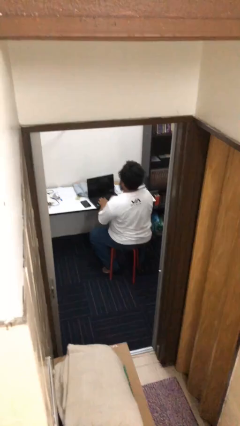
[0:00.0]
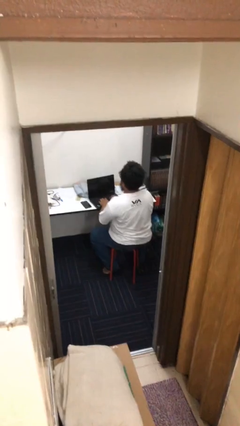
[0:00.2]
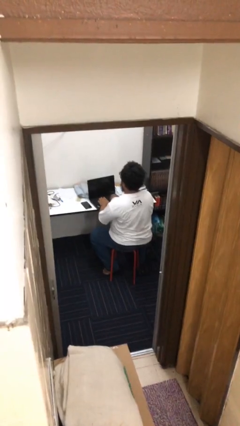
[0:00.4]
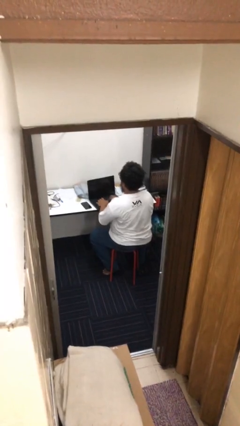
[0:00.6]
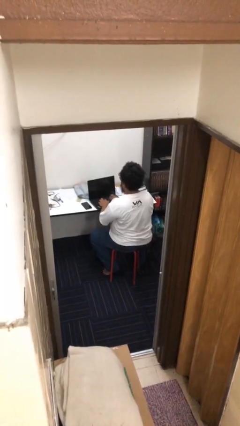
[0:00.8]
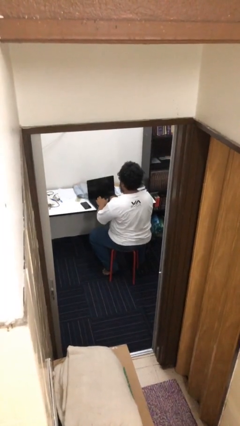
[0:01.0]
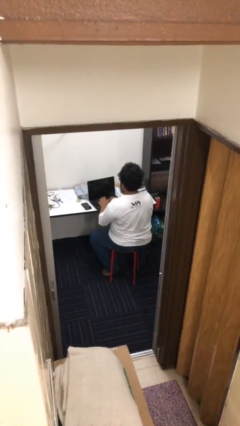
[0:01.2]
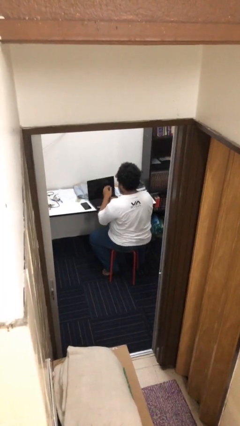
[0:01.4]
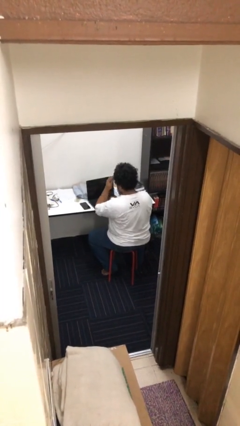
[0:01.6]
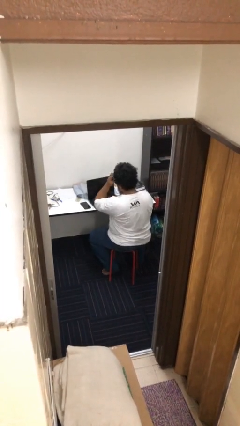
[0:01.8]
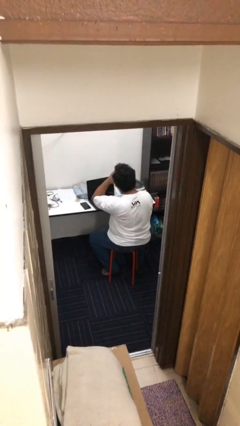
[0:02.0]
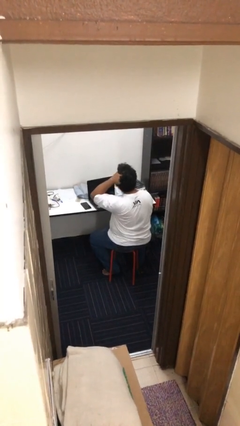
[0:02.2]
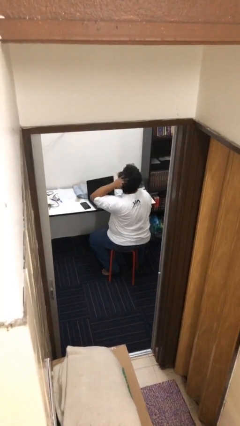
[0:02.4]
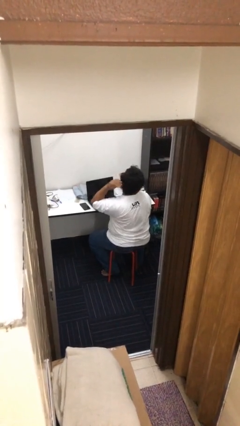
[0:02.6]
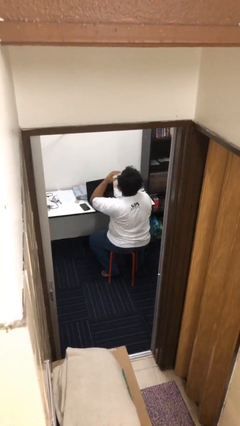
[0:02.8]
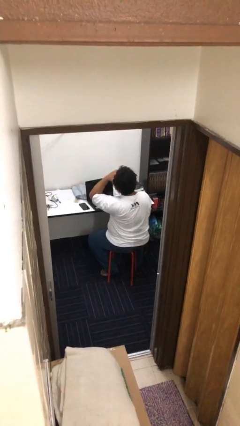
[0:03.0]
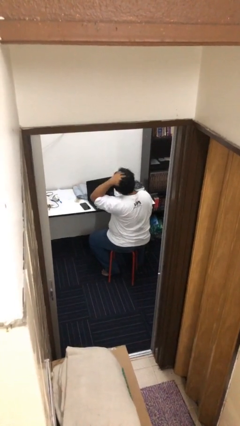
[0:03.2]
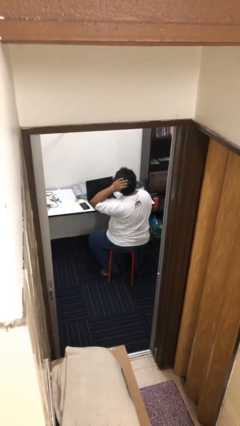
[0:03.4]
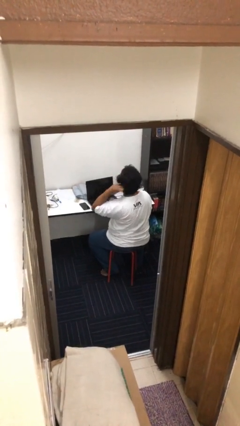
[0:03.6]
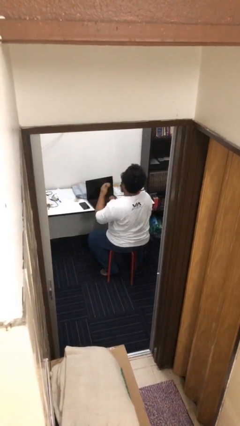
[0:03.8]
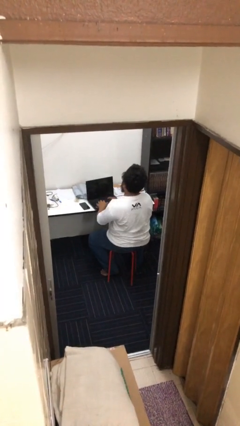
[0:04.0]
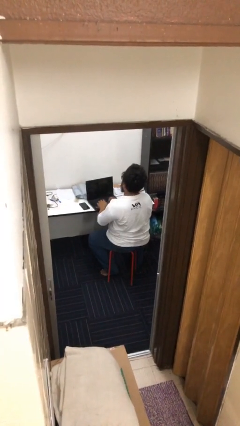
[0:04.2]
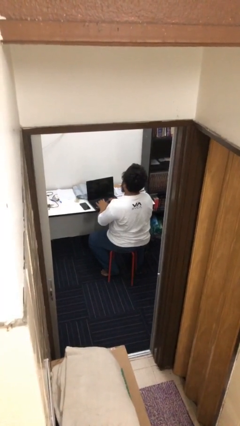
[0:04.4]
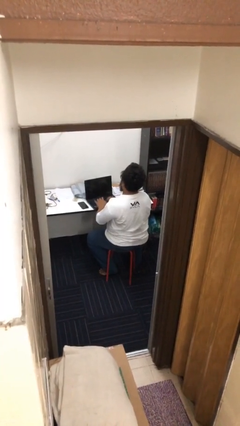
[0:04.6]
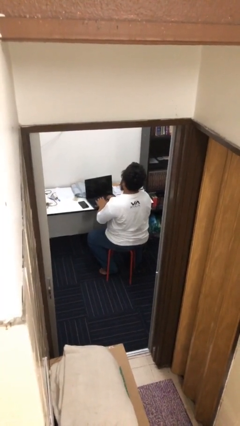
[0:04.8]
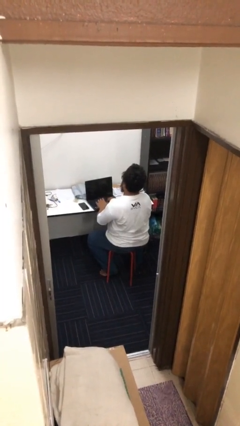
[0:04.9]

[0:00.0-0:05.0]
person interacts with laptop

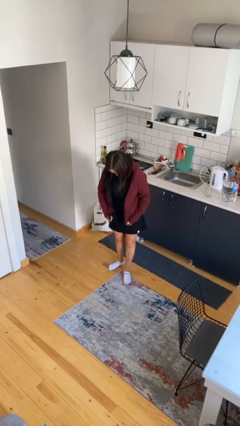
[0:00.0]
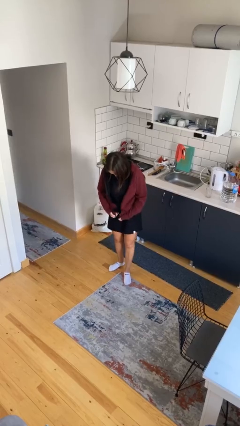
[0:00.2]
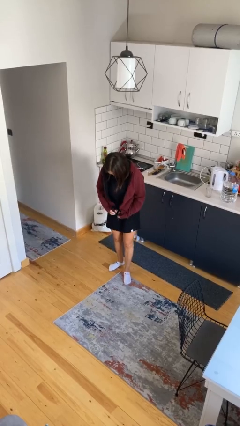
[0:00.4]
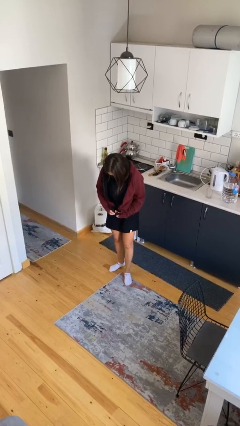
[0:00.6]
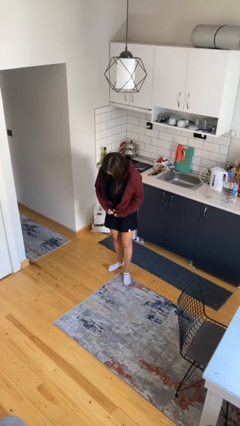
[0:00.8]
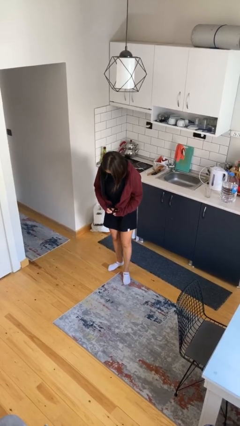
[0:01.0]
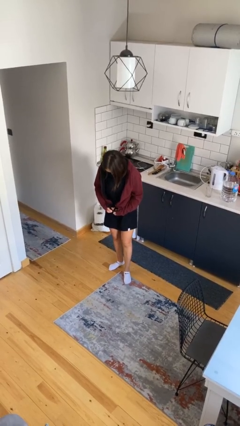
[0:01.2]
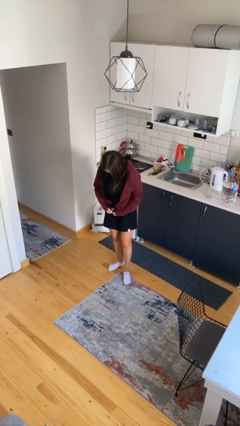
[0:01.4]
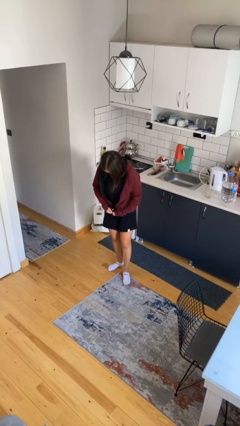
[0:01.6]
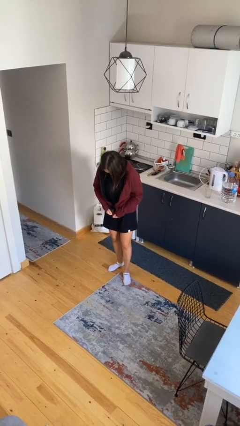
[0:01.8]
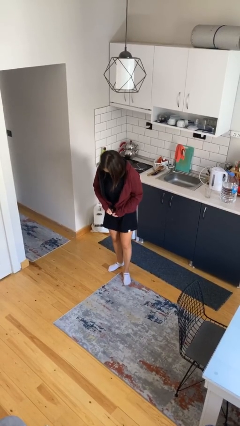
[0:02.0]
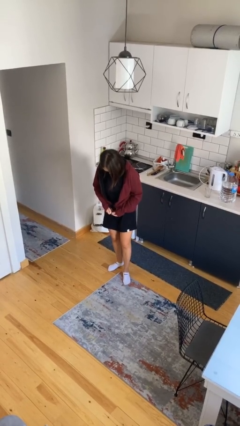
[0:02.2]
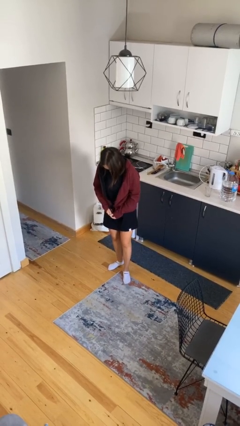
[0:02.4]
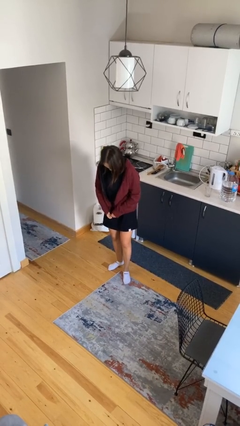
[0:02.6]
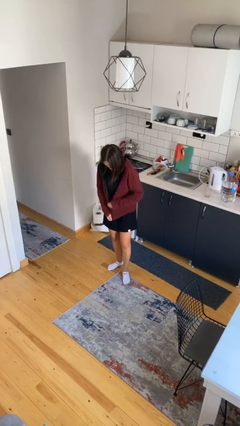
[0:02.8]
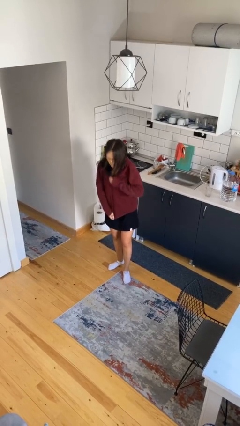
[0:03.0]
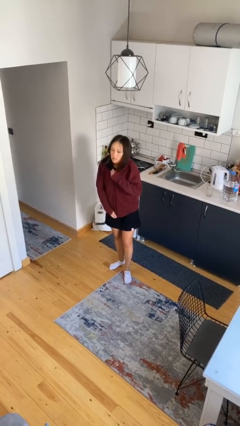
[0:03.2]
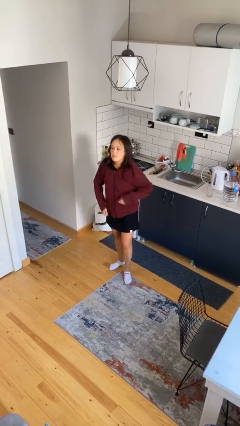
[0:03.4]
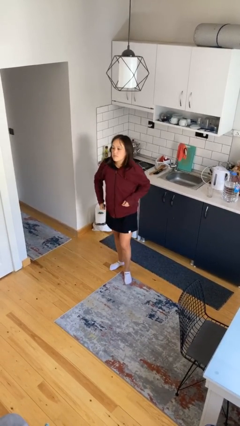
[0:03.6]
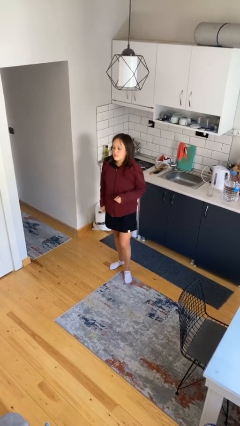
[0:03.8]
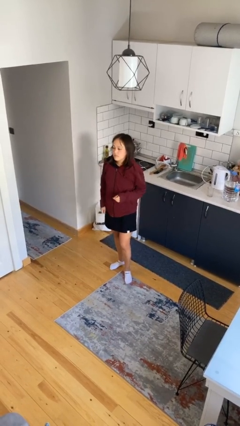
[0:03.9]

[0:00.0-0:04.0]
person zips up jacket

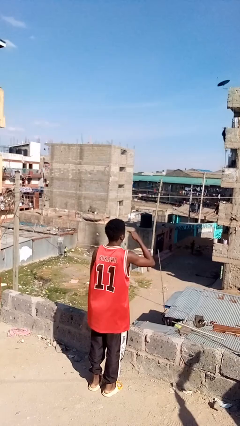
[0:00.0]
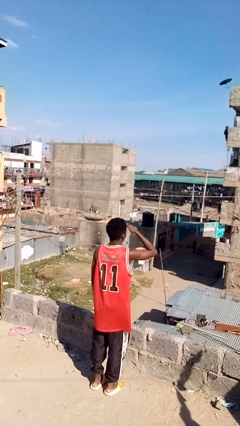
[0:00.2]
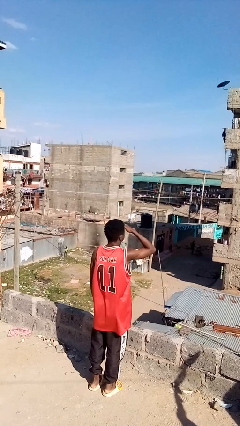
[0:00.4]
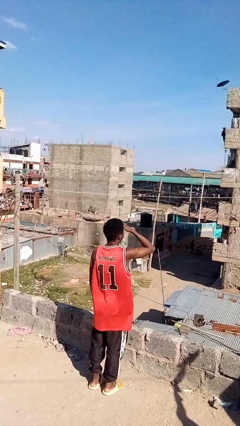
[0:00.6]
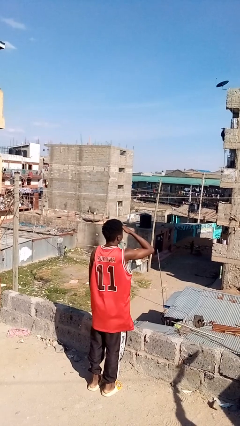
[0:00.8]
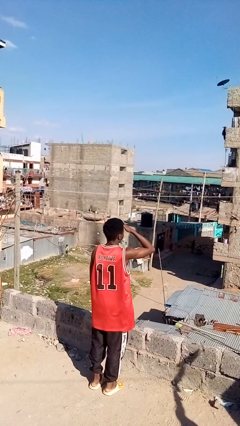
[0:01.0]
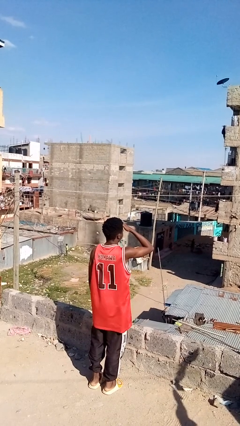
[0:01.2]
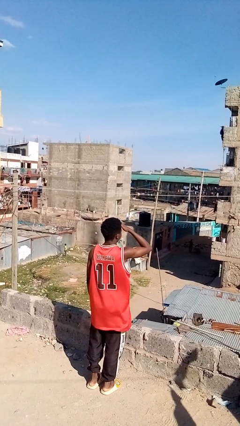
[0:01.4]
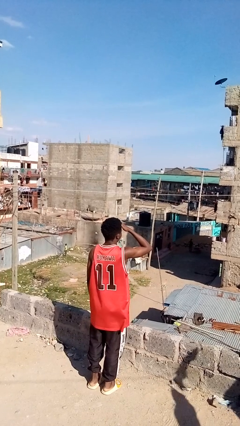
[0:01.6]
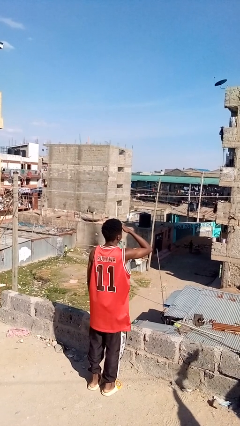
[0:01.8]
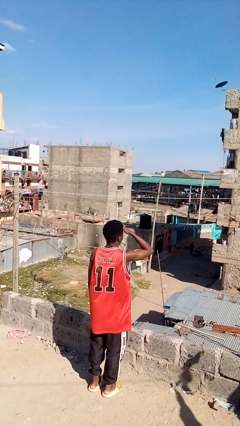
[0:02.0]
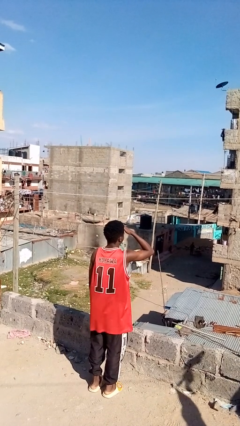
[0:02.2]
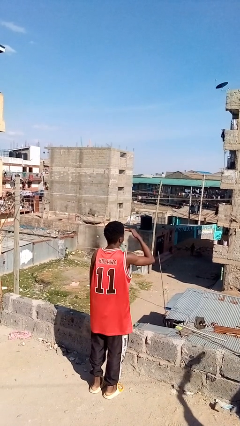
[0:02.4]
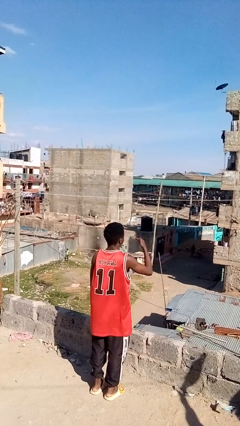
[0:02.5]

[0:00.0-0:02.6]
person shades eyes

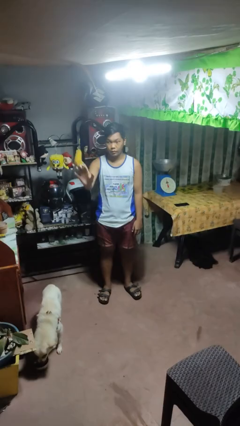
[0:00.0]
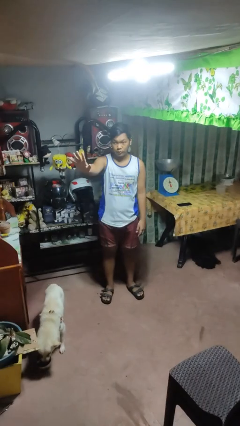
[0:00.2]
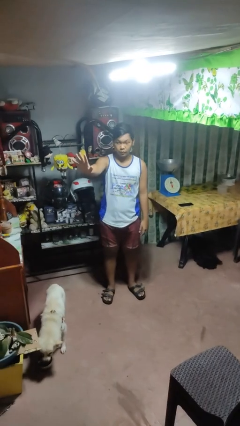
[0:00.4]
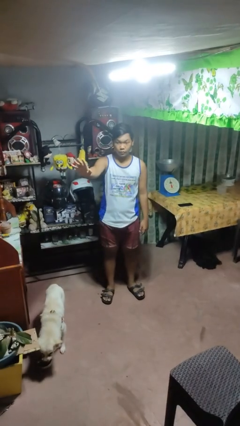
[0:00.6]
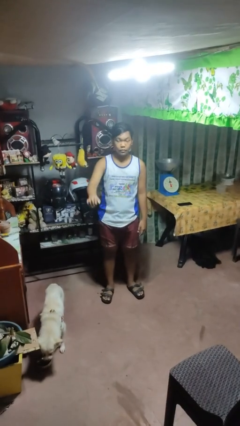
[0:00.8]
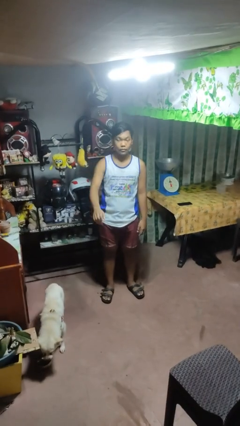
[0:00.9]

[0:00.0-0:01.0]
person gestures stop

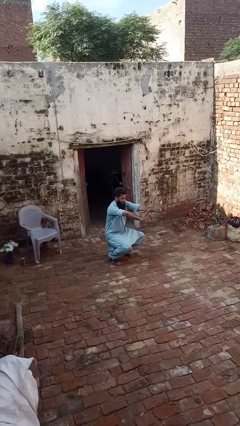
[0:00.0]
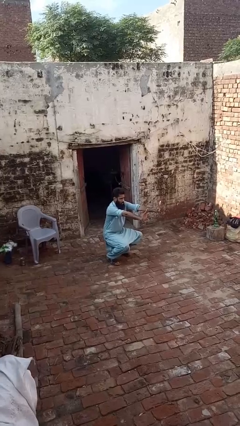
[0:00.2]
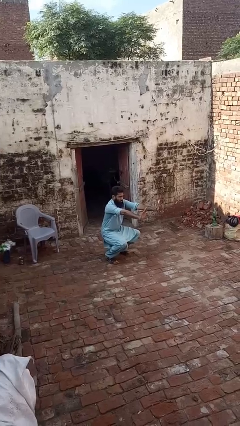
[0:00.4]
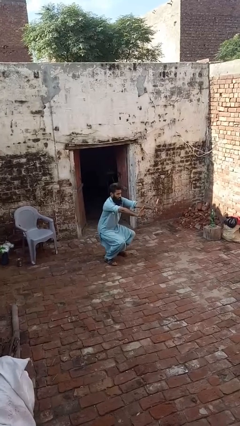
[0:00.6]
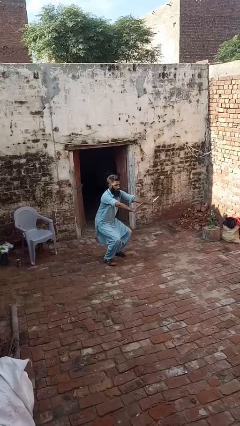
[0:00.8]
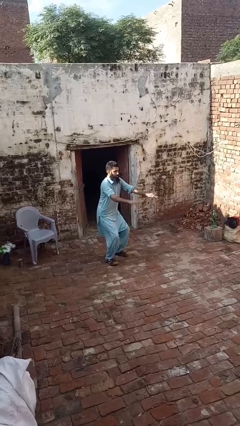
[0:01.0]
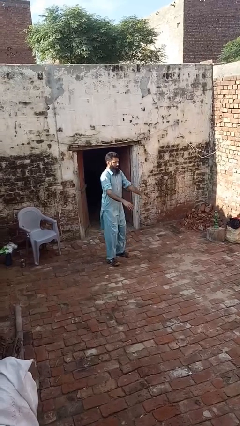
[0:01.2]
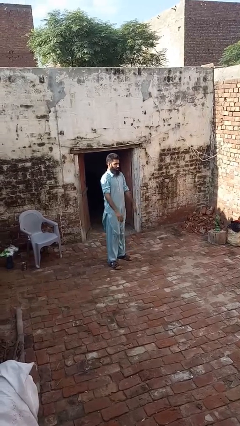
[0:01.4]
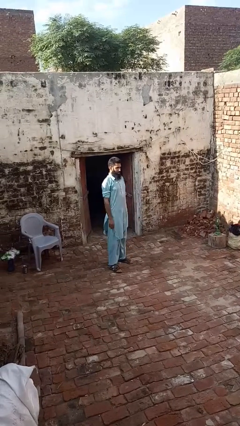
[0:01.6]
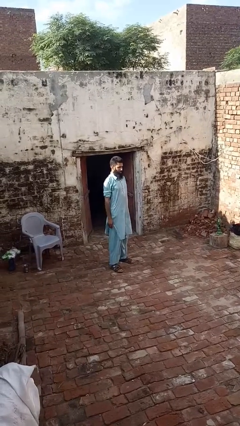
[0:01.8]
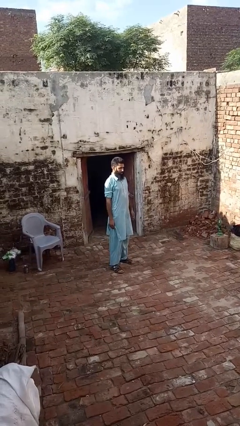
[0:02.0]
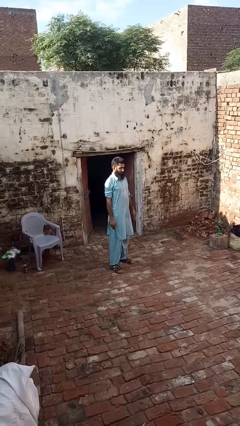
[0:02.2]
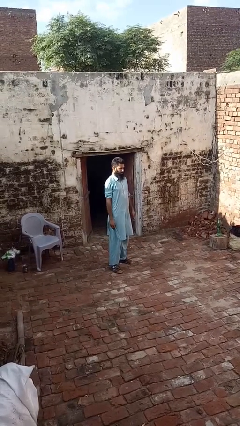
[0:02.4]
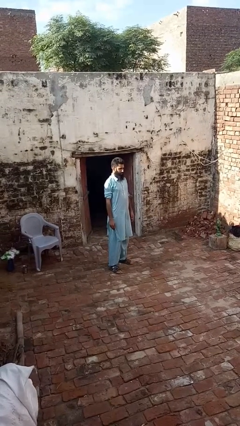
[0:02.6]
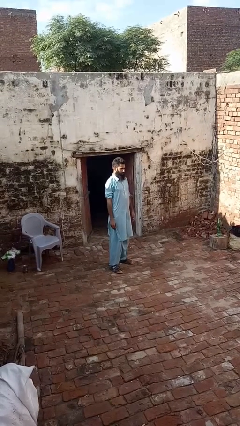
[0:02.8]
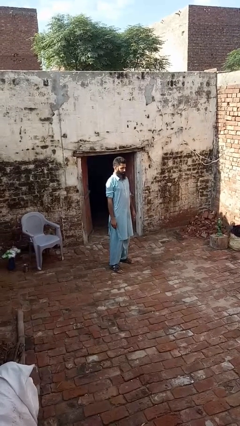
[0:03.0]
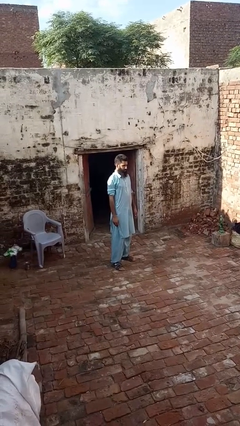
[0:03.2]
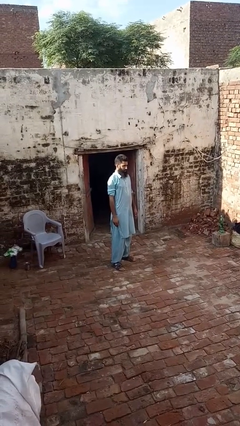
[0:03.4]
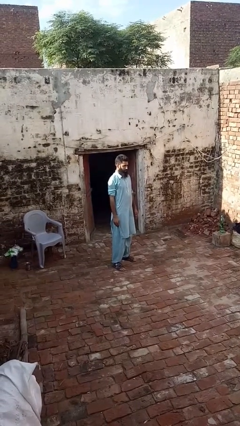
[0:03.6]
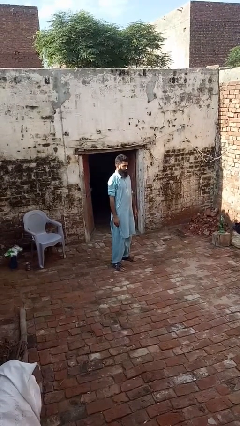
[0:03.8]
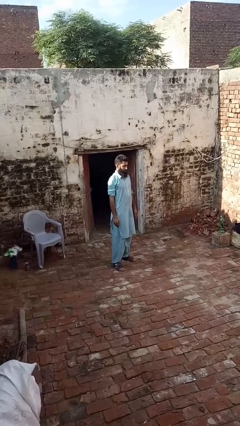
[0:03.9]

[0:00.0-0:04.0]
person stands up

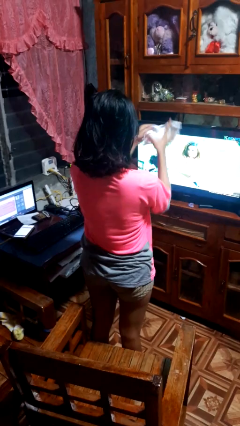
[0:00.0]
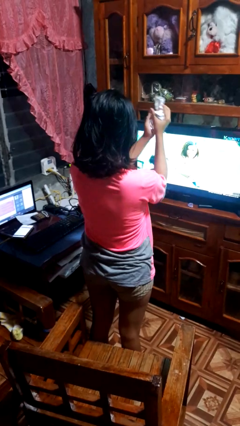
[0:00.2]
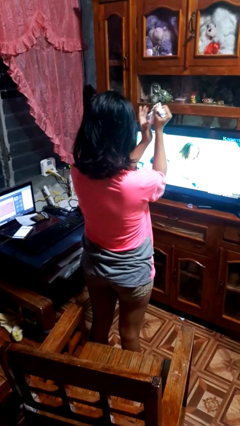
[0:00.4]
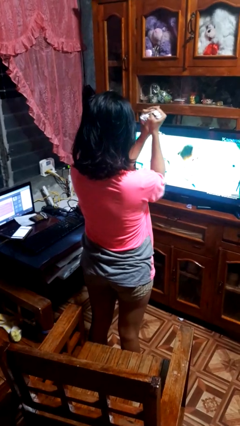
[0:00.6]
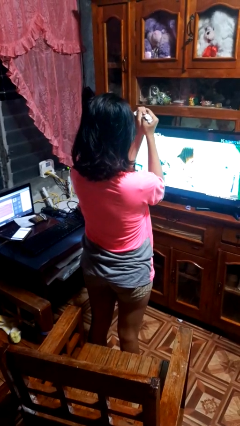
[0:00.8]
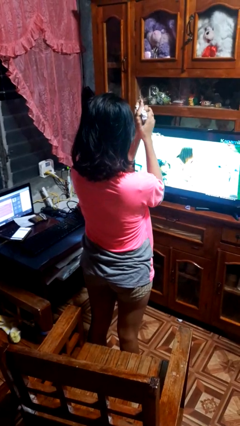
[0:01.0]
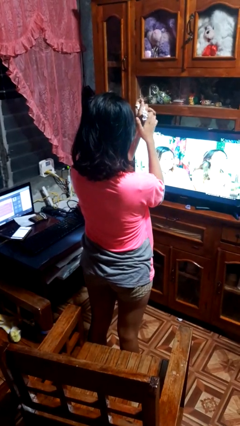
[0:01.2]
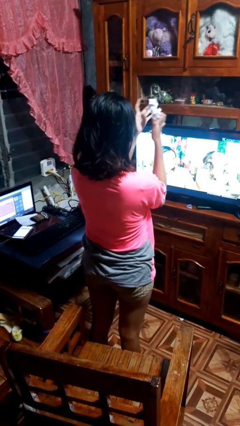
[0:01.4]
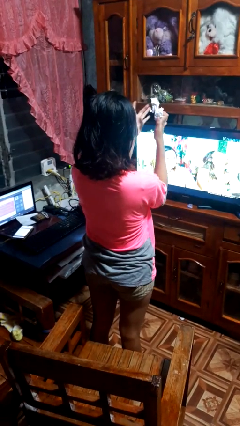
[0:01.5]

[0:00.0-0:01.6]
person crumples paper
